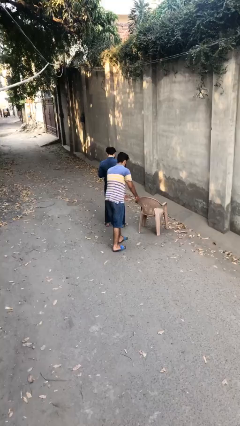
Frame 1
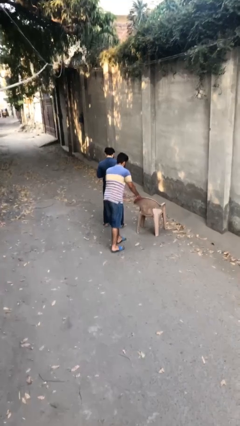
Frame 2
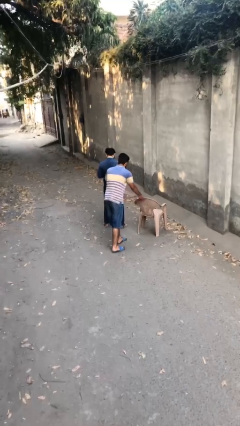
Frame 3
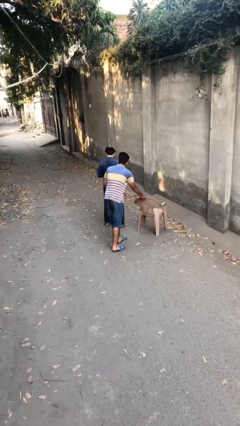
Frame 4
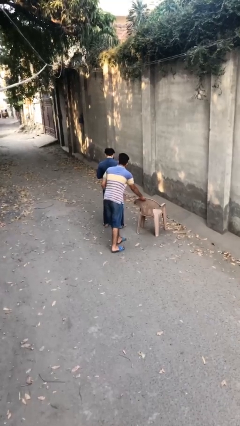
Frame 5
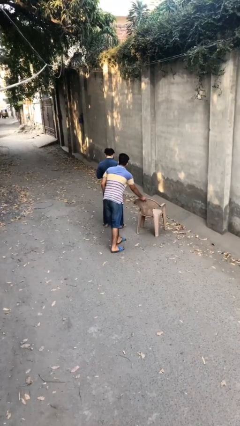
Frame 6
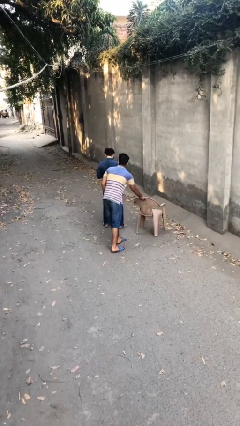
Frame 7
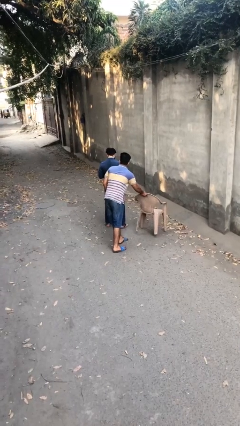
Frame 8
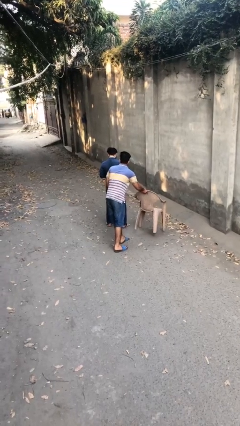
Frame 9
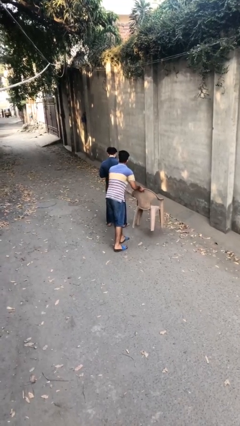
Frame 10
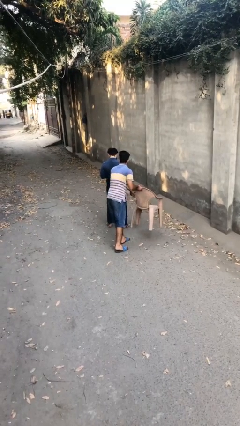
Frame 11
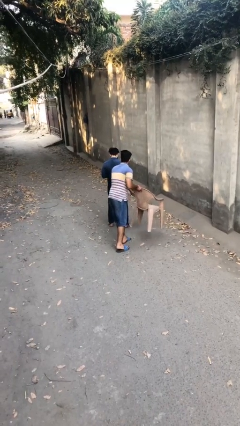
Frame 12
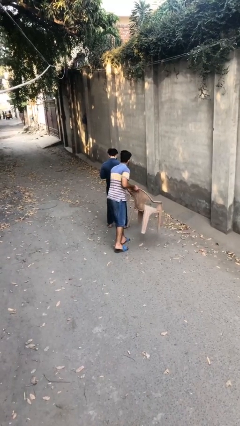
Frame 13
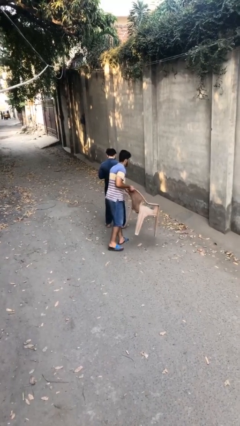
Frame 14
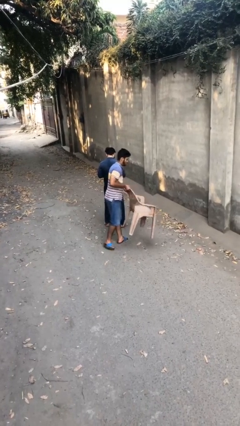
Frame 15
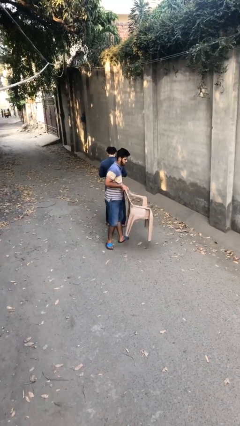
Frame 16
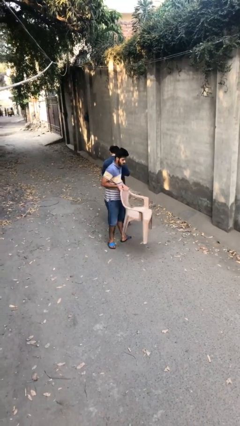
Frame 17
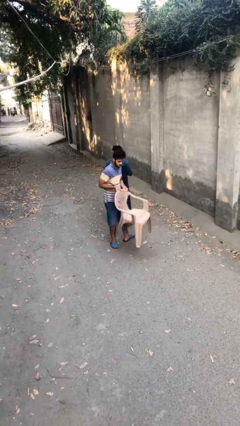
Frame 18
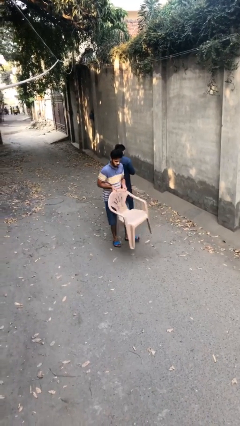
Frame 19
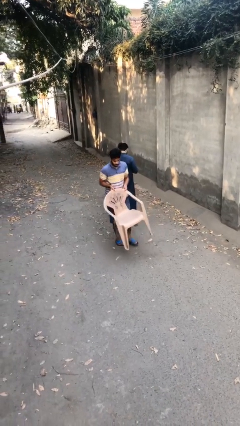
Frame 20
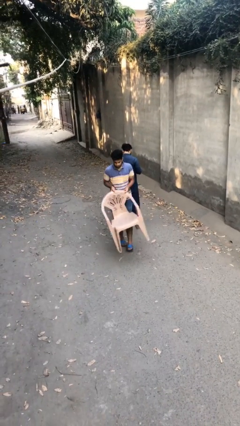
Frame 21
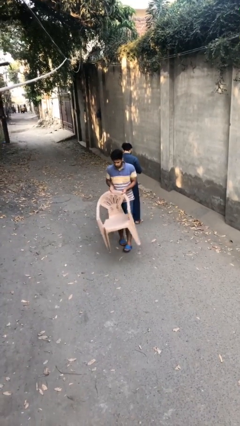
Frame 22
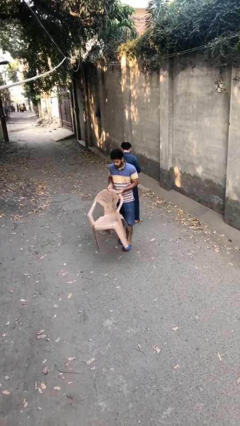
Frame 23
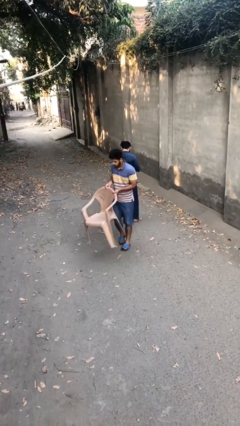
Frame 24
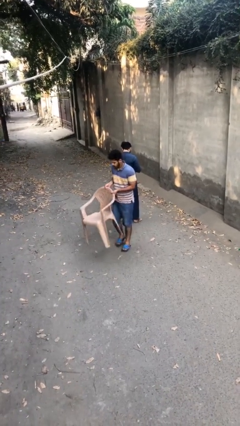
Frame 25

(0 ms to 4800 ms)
person steals object from person

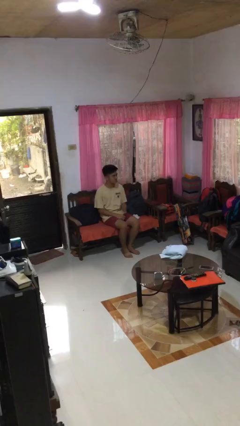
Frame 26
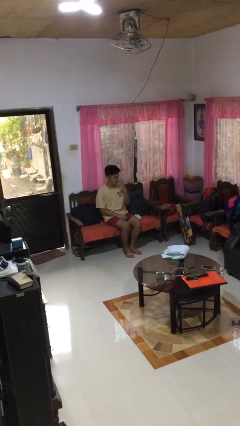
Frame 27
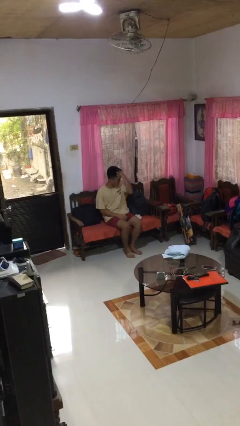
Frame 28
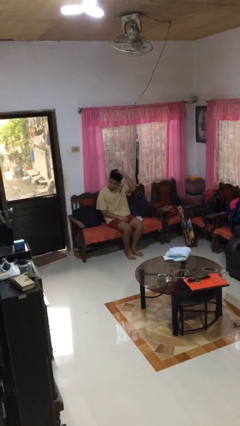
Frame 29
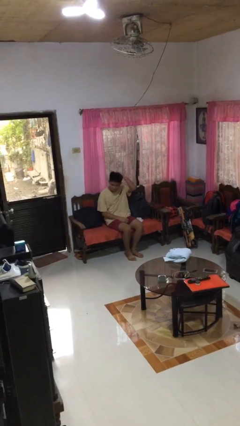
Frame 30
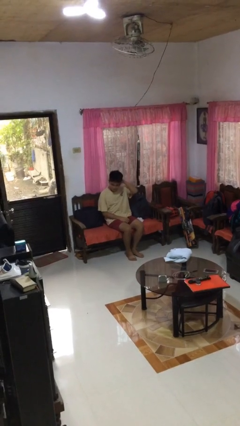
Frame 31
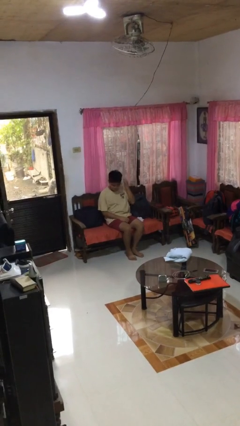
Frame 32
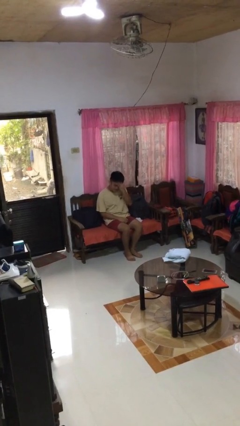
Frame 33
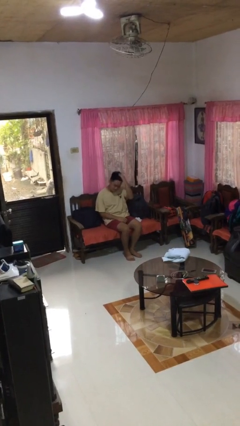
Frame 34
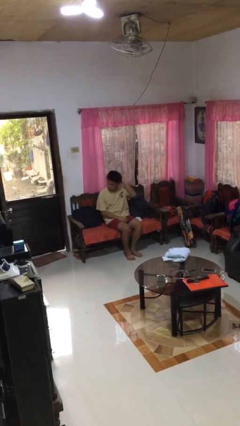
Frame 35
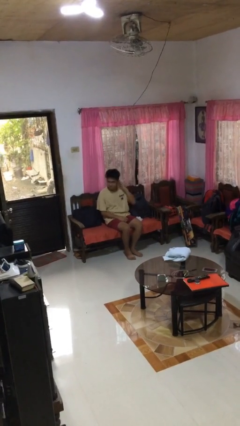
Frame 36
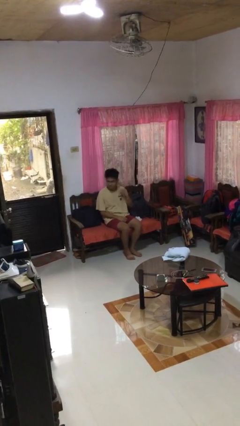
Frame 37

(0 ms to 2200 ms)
person strokes hair

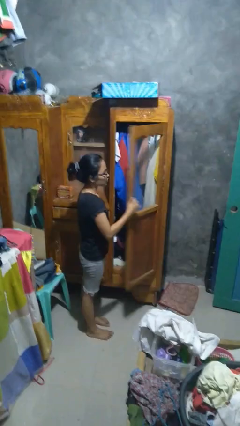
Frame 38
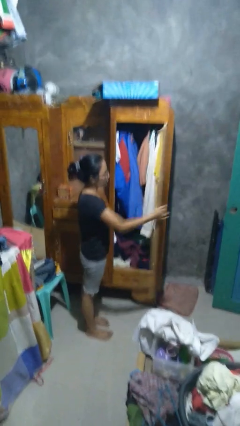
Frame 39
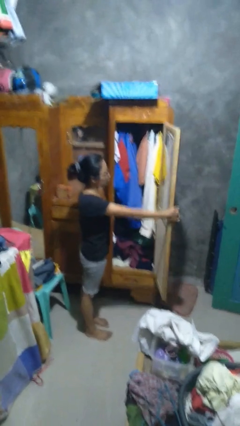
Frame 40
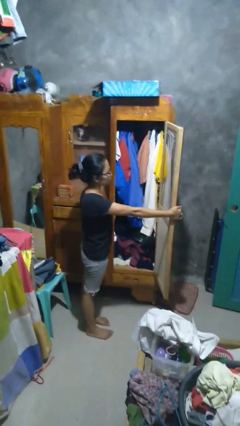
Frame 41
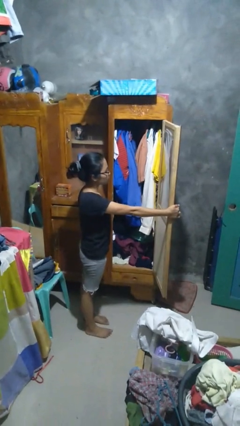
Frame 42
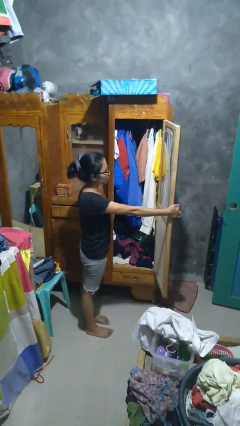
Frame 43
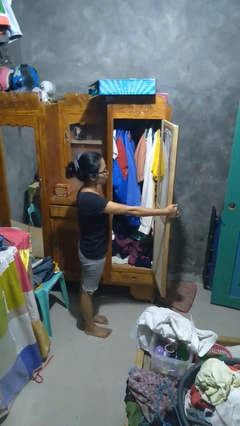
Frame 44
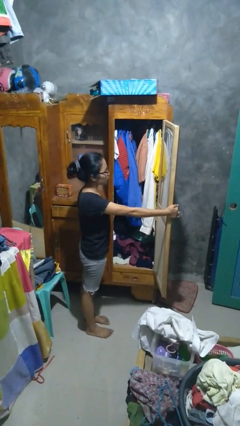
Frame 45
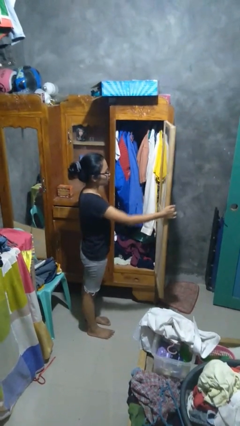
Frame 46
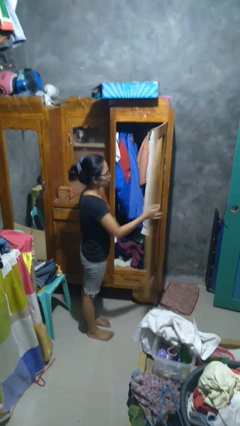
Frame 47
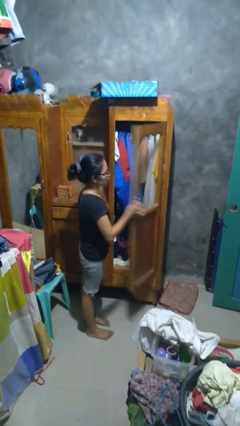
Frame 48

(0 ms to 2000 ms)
person opens closet door

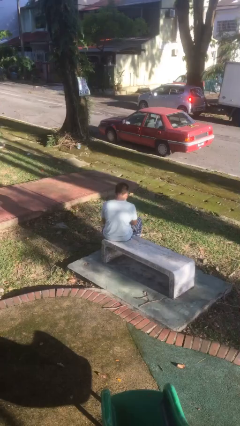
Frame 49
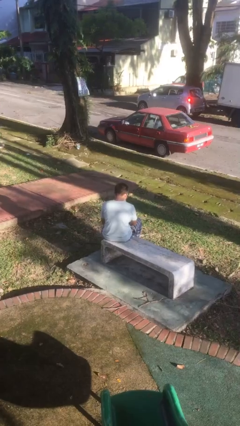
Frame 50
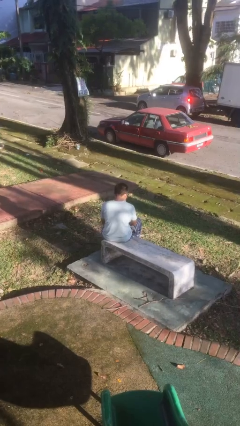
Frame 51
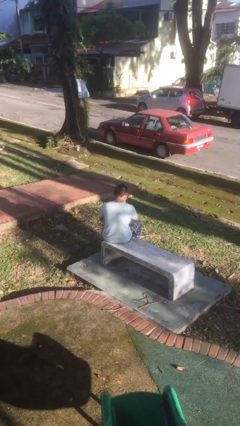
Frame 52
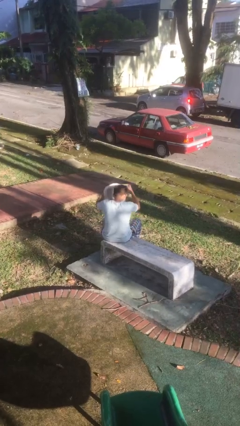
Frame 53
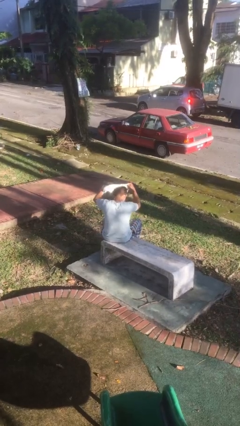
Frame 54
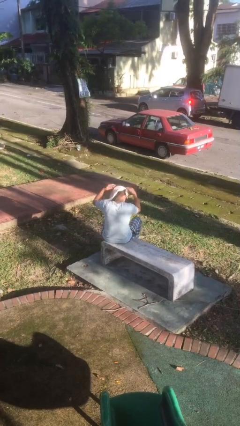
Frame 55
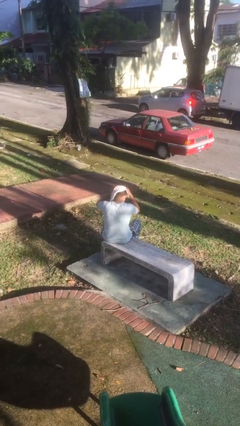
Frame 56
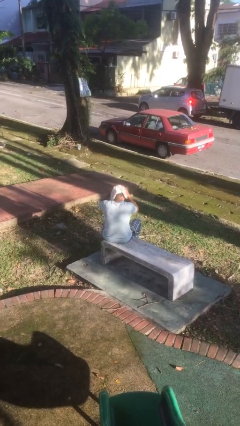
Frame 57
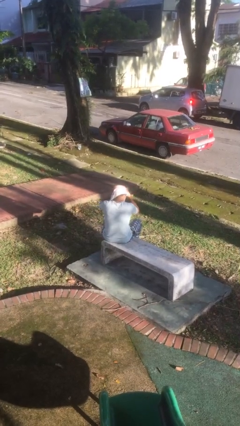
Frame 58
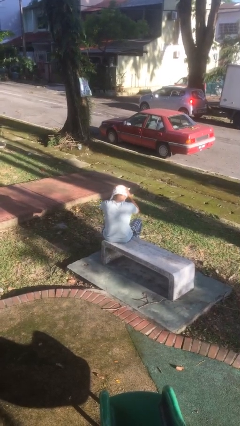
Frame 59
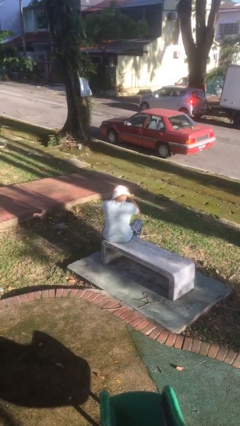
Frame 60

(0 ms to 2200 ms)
person dries hair with towel

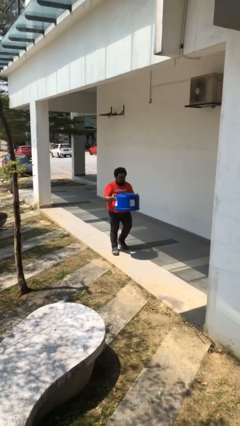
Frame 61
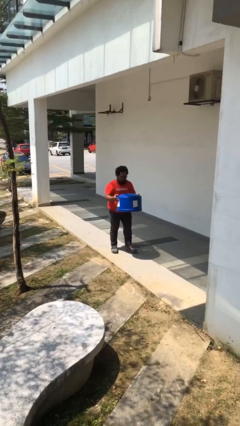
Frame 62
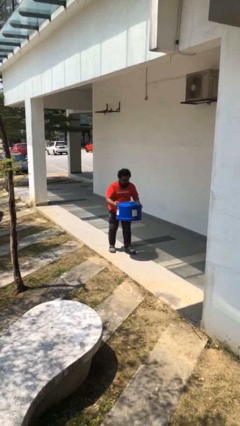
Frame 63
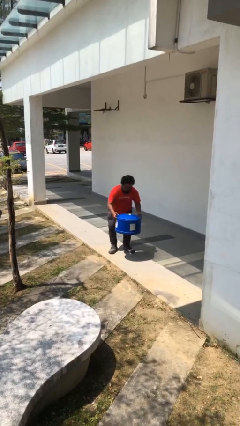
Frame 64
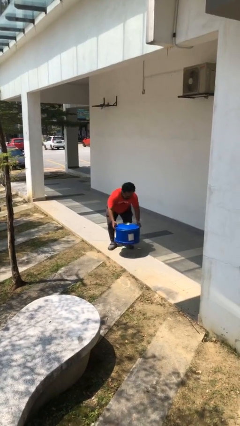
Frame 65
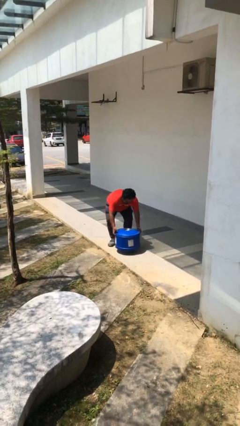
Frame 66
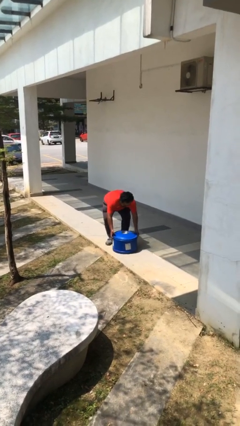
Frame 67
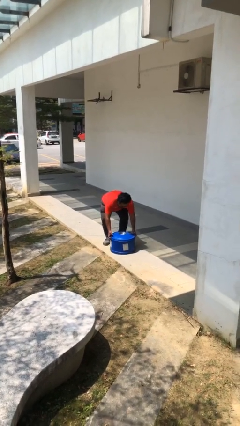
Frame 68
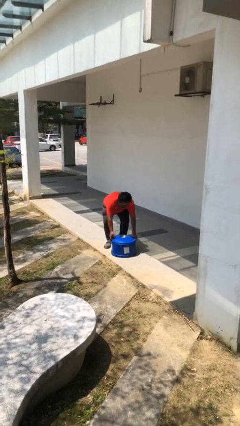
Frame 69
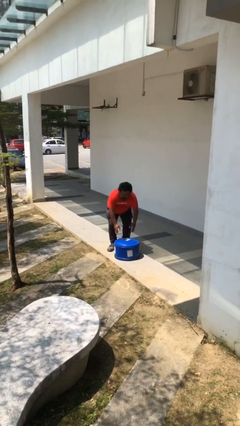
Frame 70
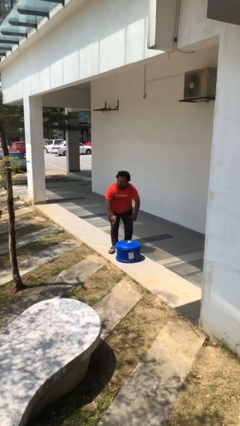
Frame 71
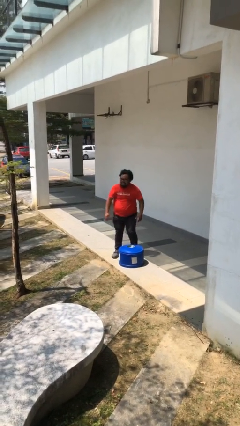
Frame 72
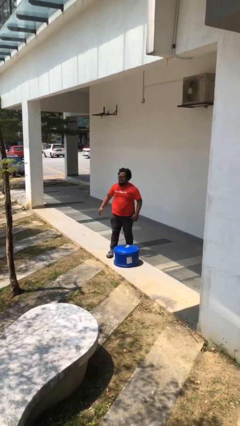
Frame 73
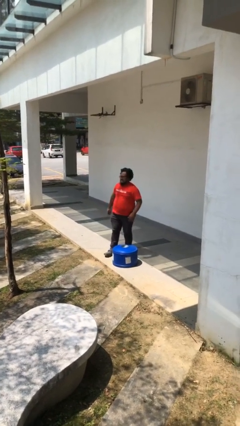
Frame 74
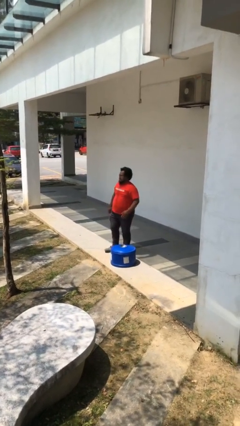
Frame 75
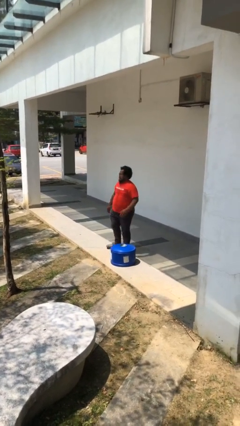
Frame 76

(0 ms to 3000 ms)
person puts down object on floor

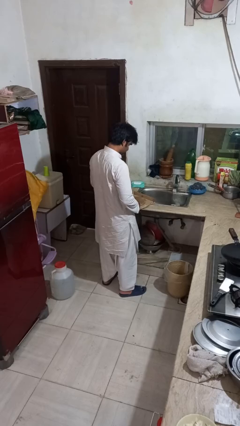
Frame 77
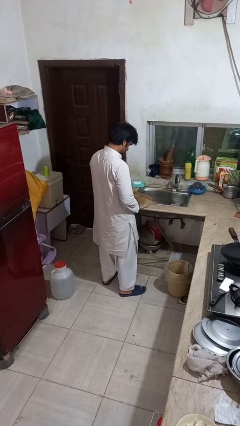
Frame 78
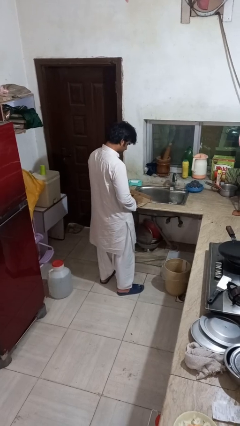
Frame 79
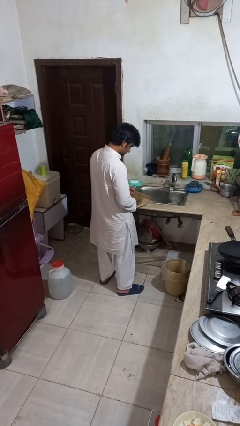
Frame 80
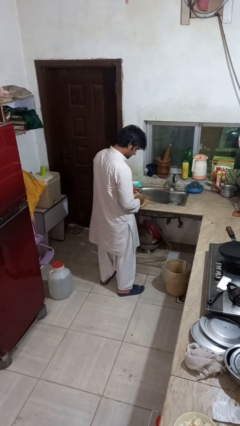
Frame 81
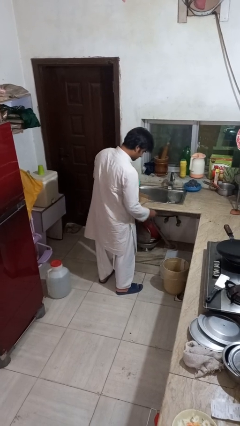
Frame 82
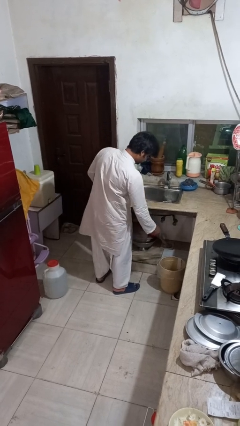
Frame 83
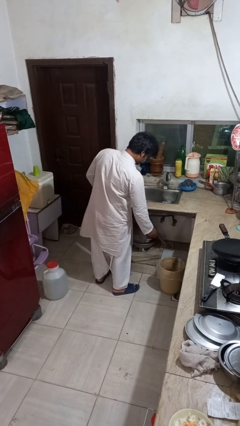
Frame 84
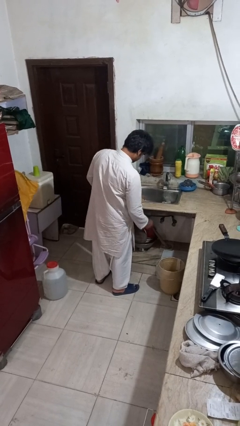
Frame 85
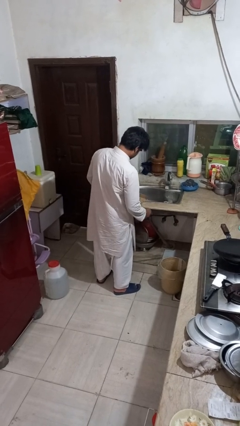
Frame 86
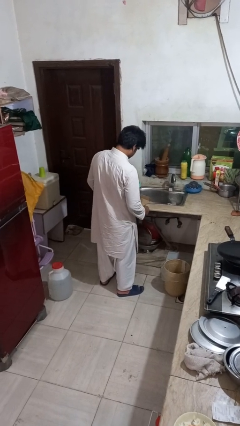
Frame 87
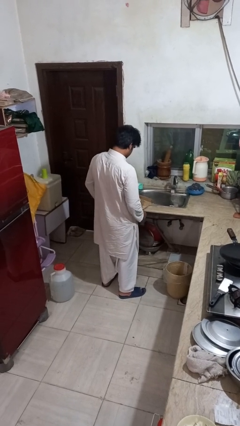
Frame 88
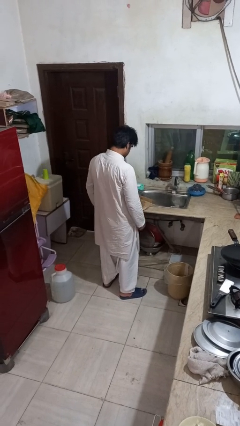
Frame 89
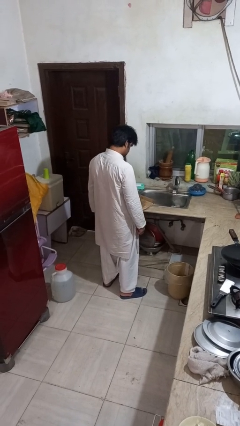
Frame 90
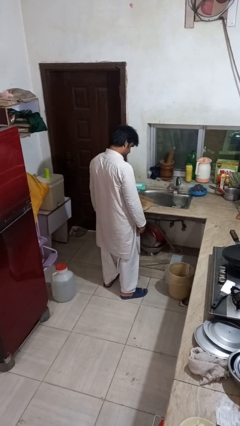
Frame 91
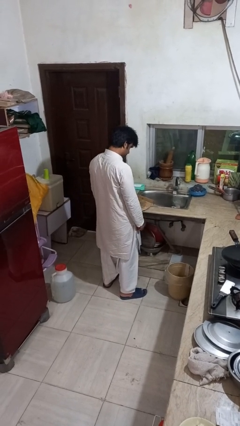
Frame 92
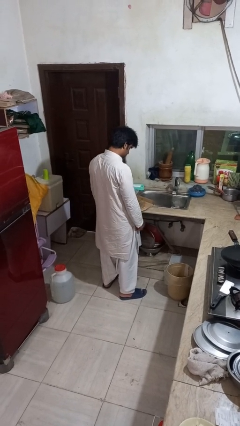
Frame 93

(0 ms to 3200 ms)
person discards trash

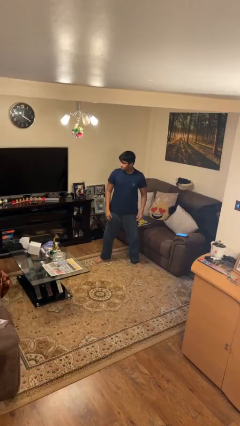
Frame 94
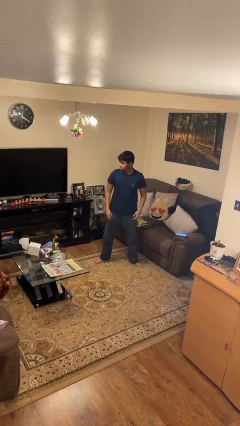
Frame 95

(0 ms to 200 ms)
person squats
